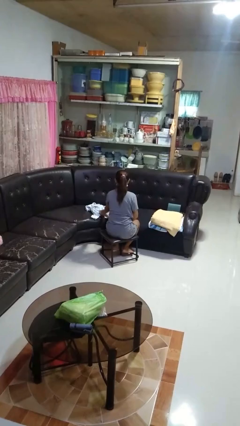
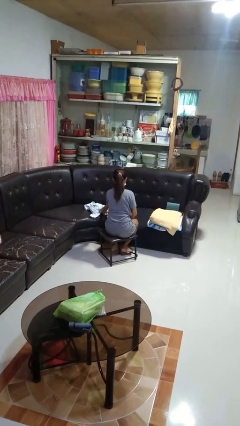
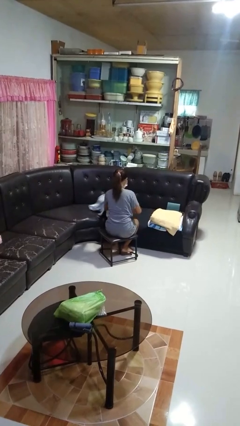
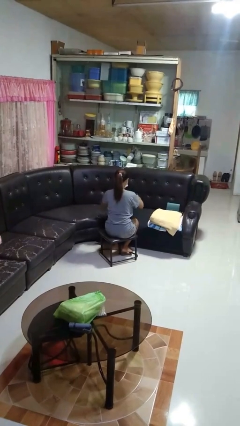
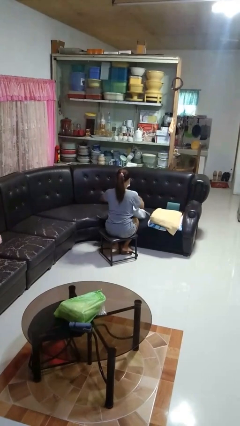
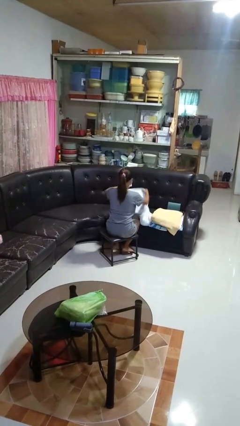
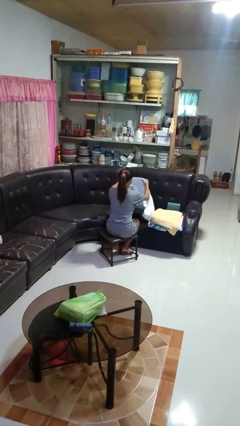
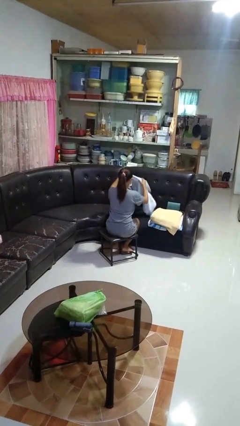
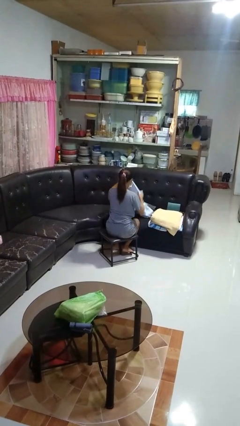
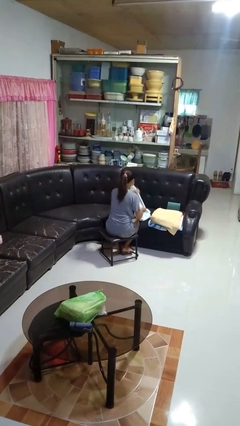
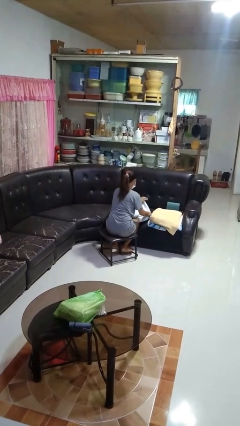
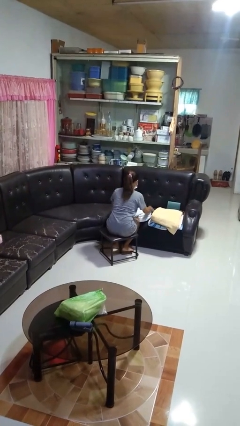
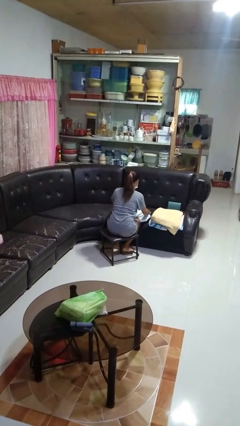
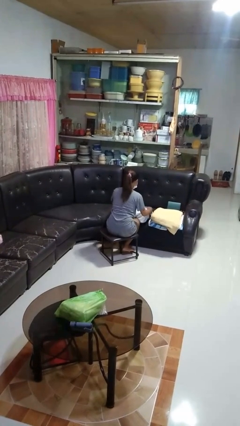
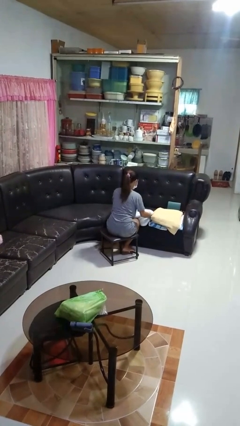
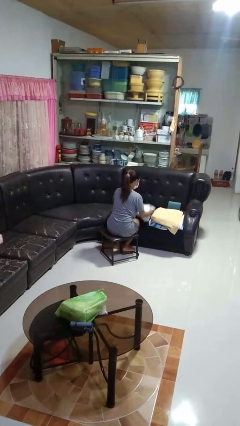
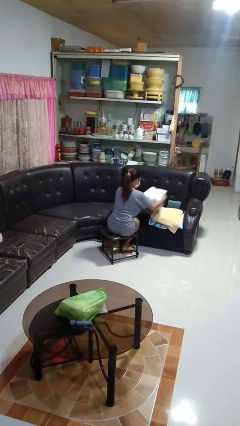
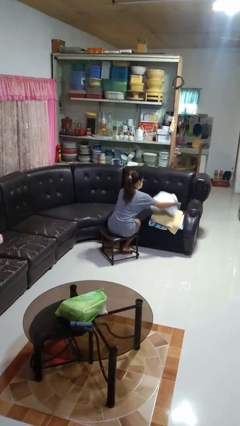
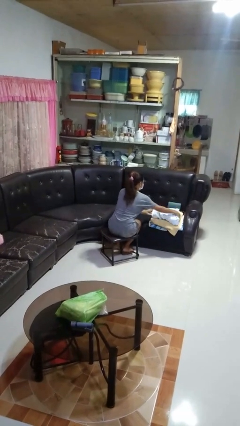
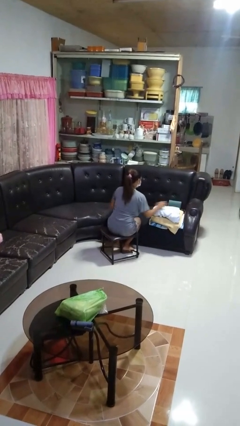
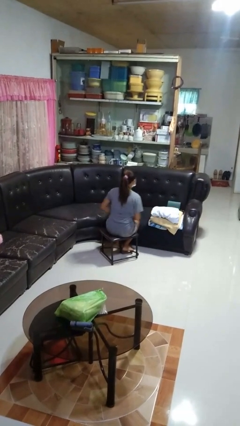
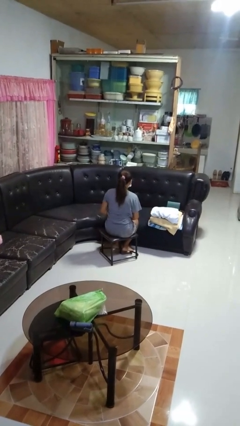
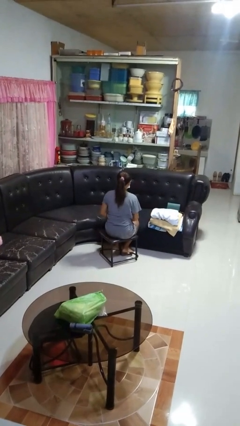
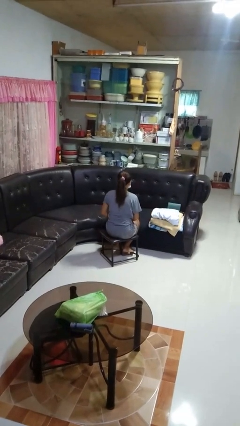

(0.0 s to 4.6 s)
person folds towel

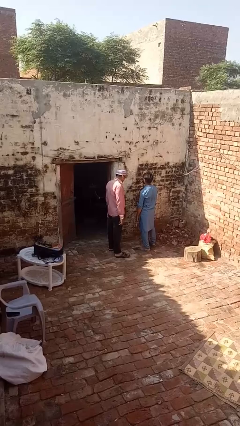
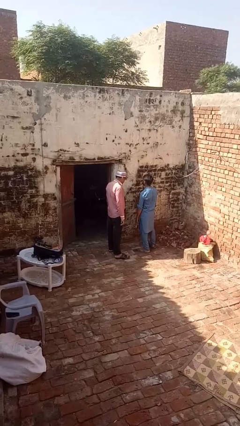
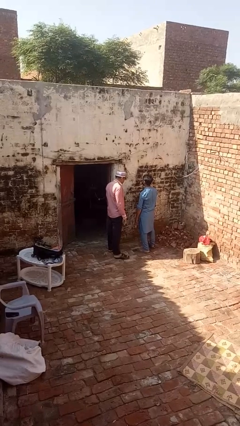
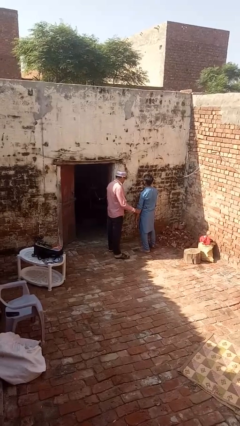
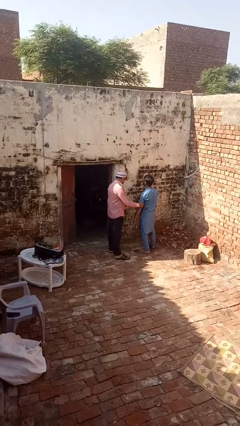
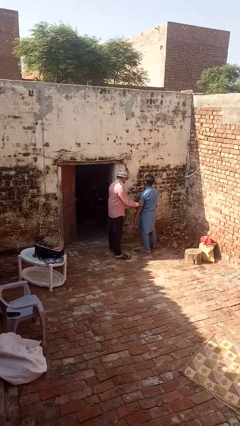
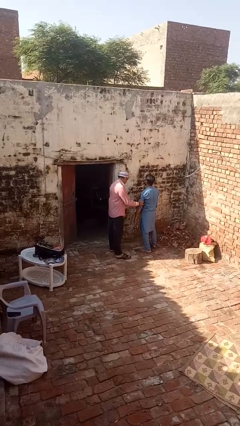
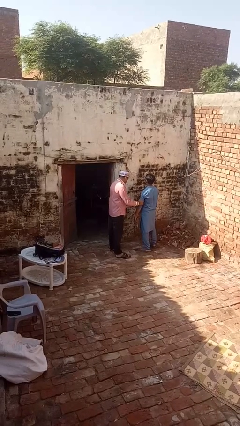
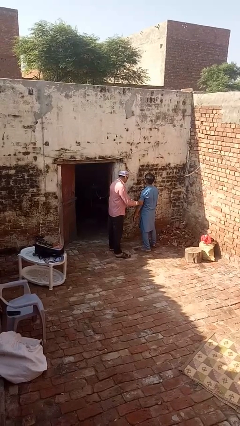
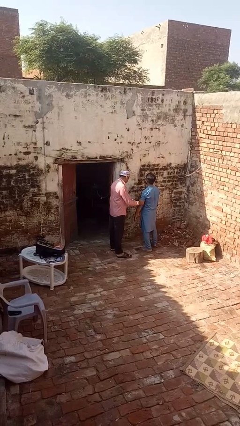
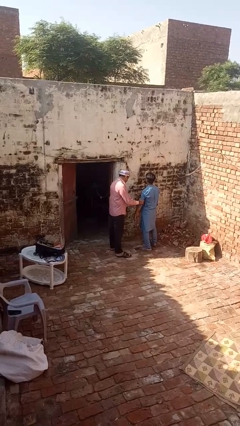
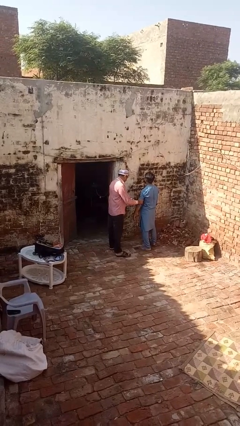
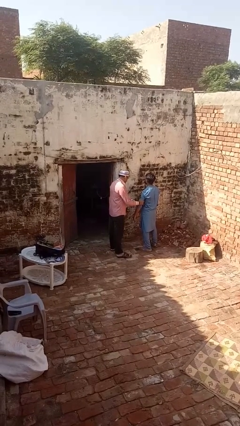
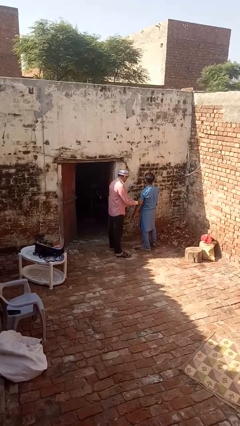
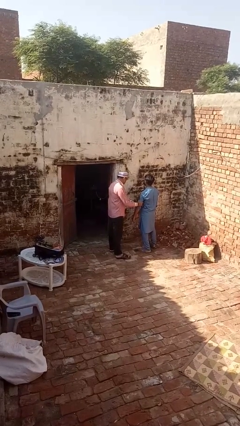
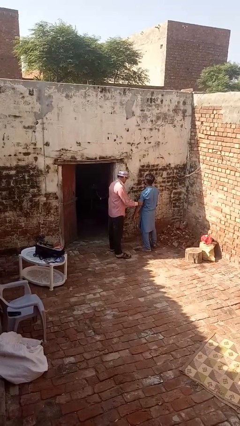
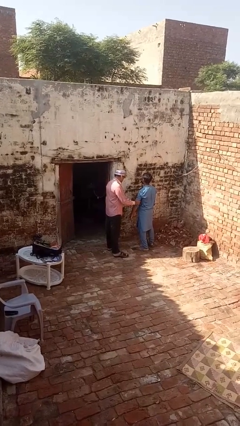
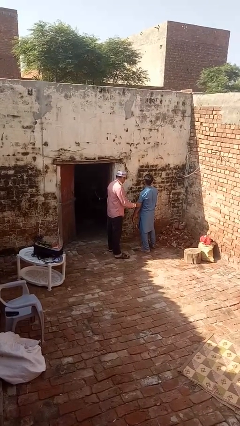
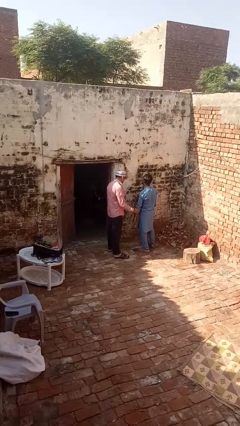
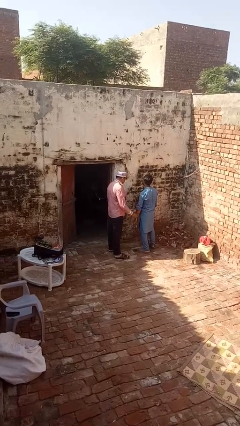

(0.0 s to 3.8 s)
person grabs person by bicep

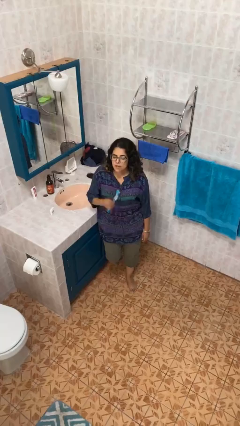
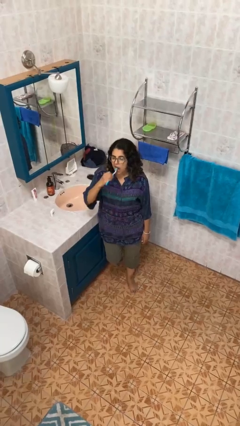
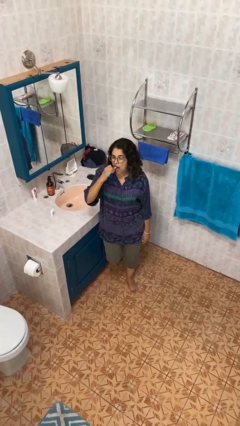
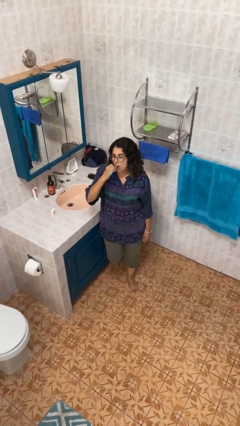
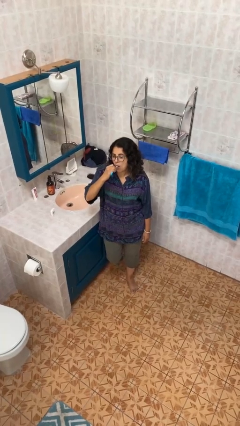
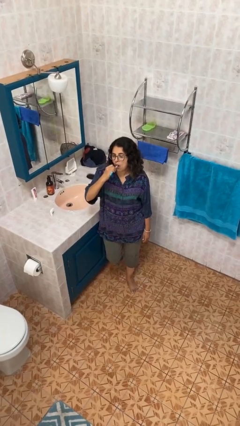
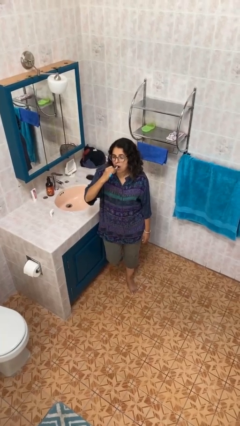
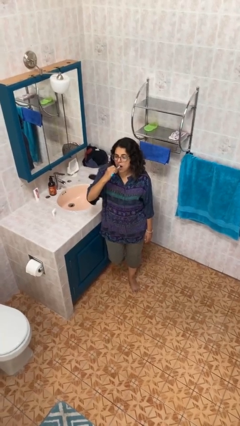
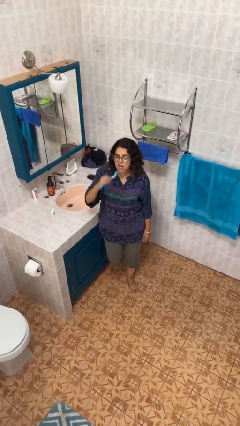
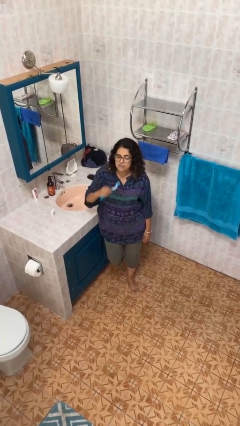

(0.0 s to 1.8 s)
person brushes teeth

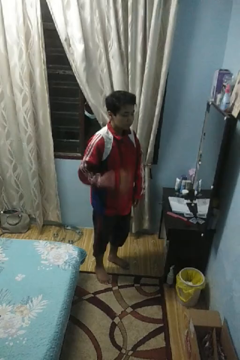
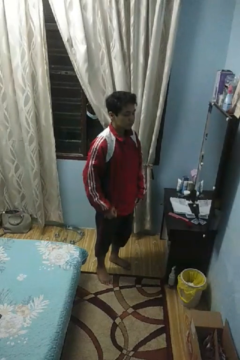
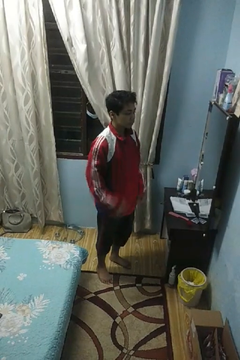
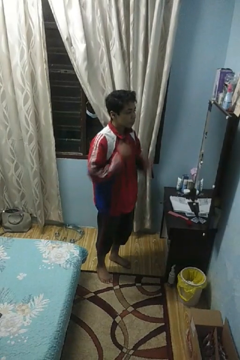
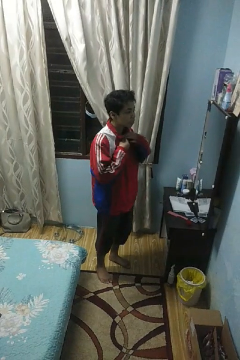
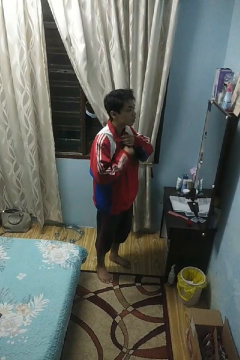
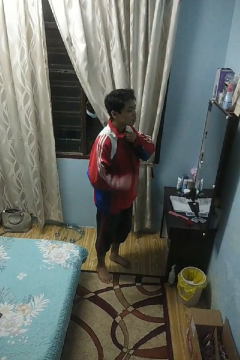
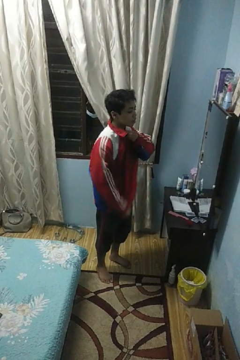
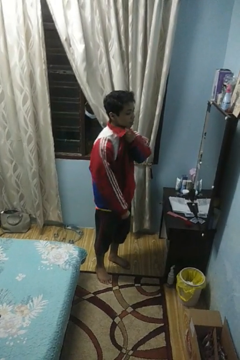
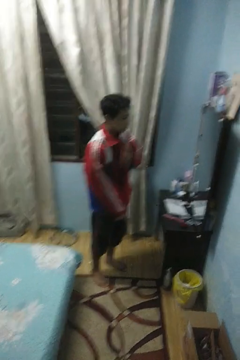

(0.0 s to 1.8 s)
person unzips jacket

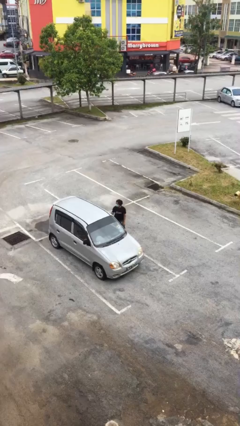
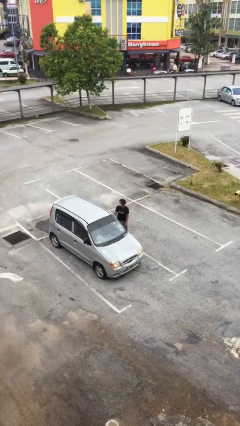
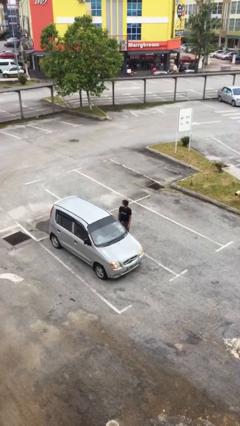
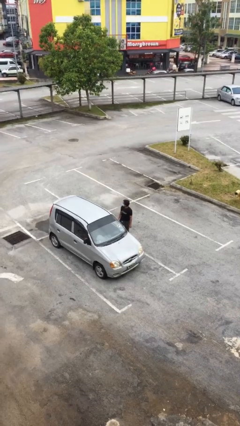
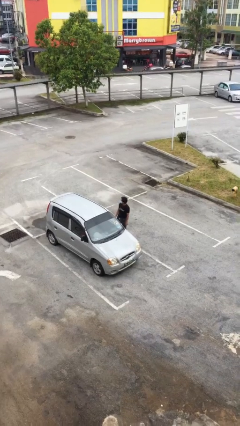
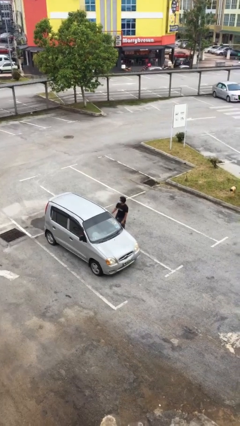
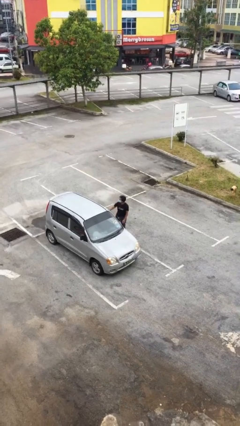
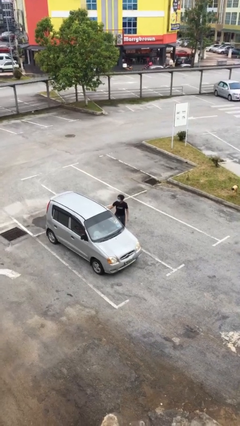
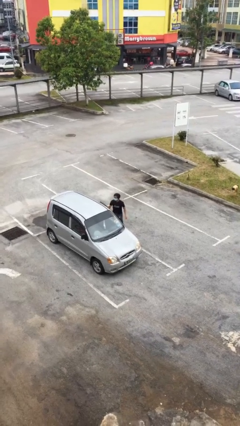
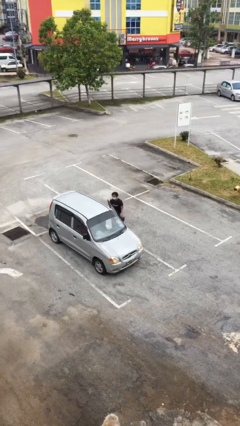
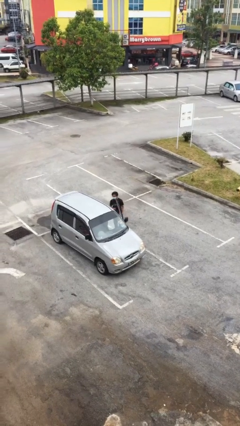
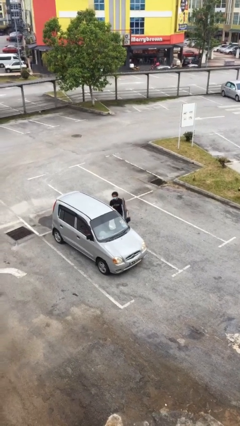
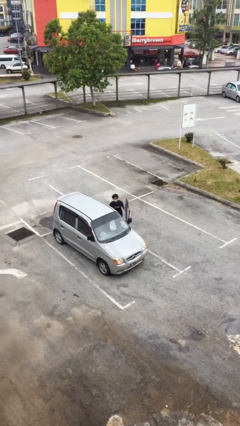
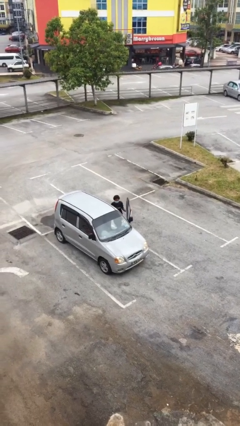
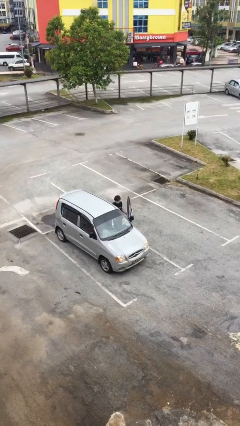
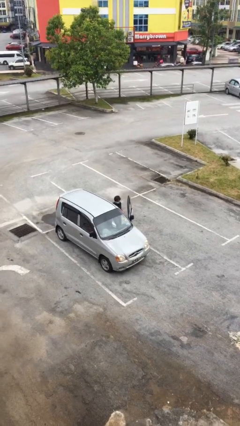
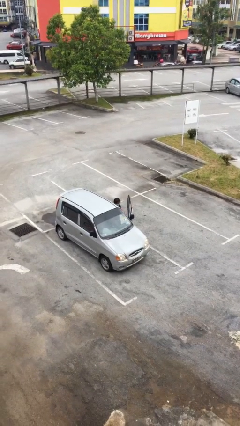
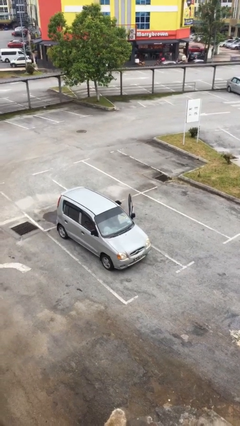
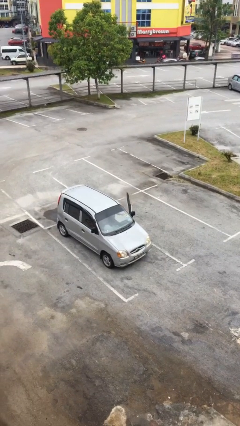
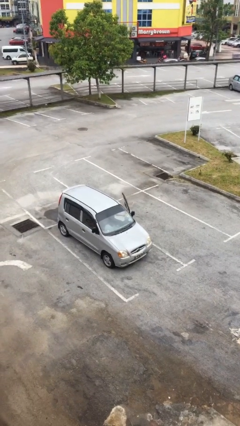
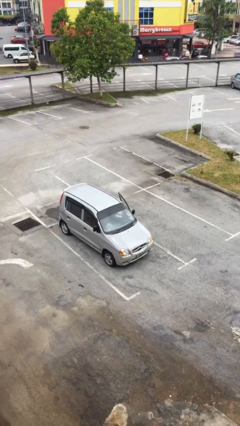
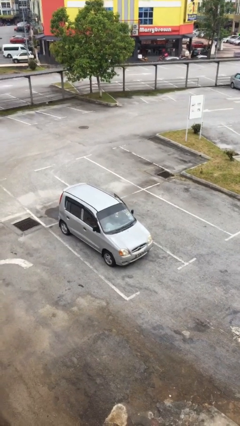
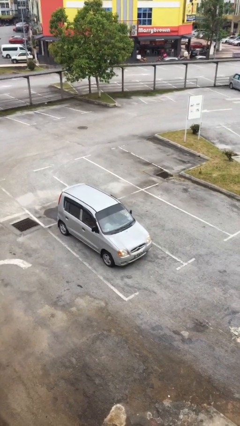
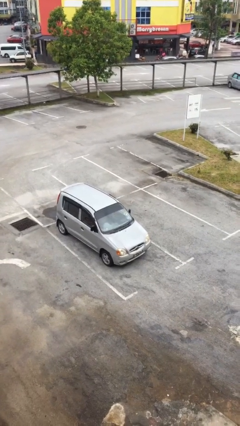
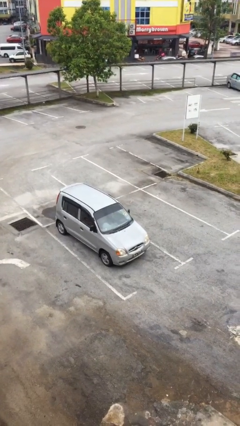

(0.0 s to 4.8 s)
person enters car

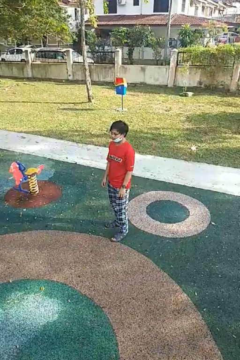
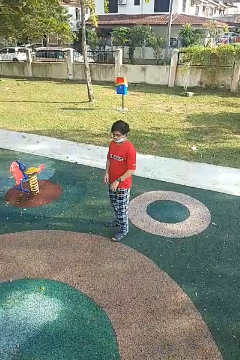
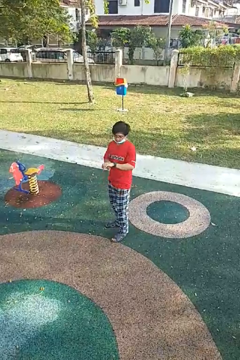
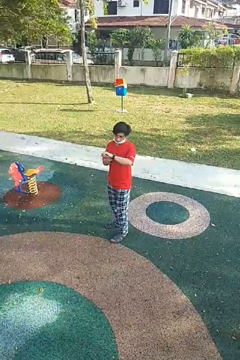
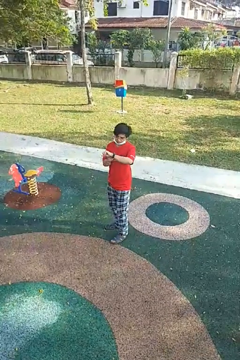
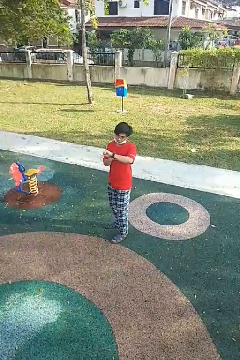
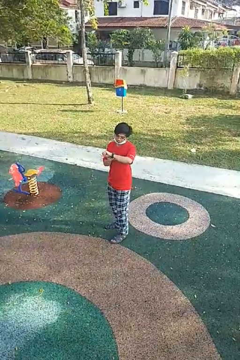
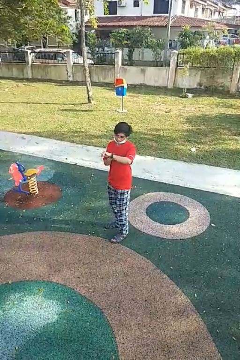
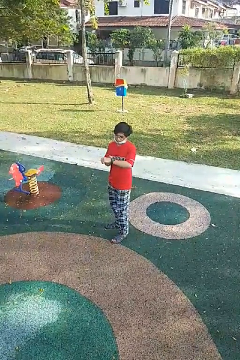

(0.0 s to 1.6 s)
person looks at wristwatch
